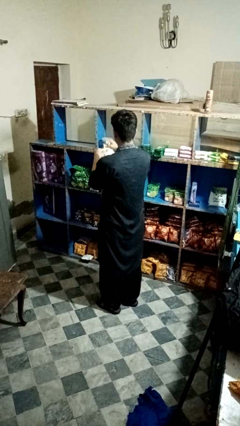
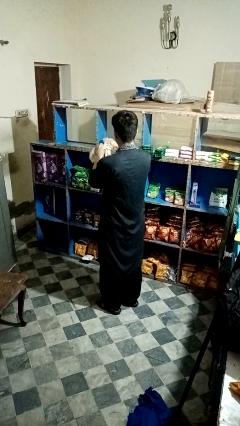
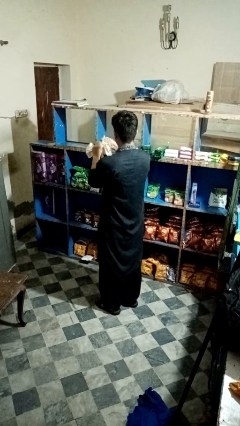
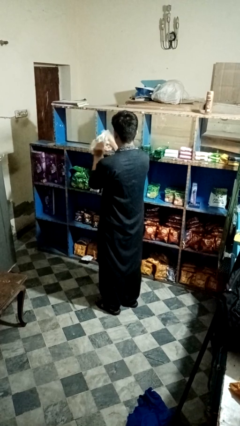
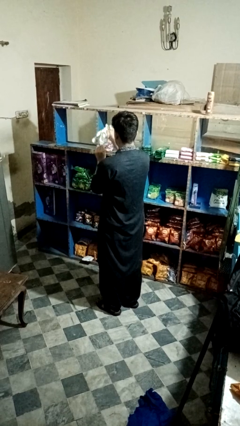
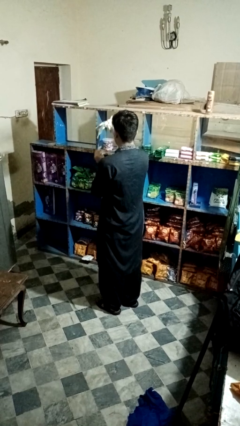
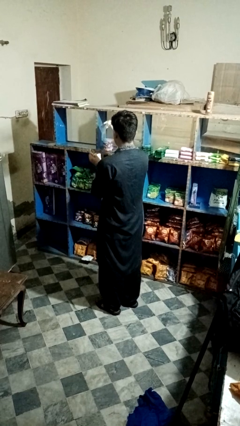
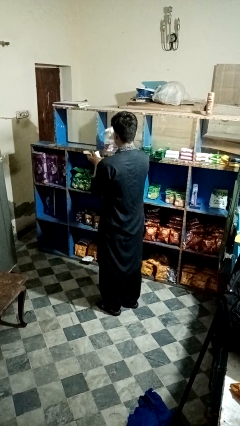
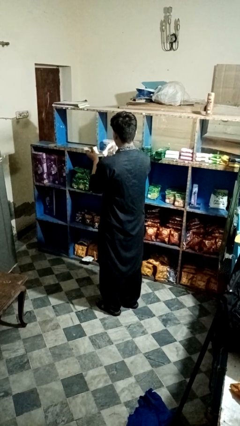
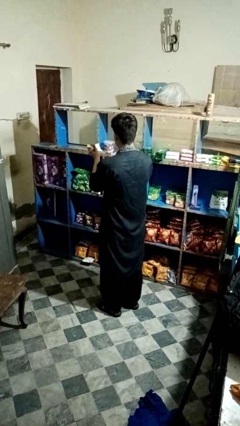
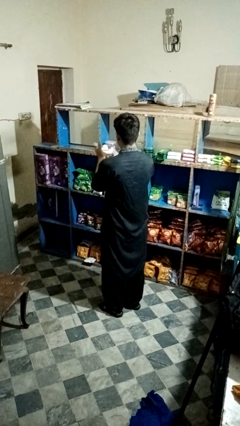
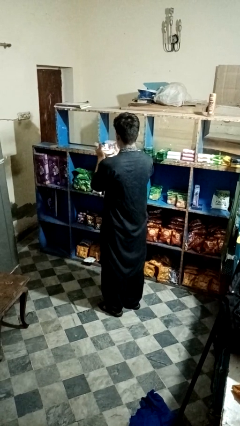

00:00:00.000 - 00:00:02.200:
person tears paper

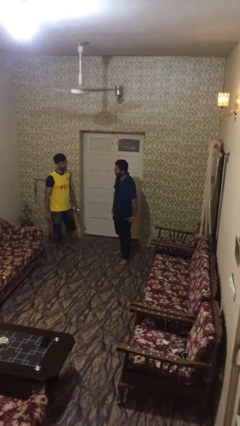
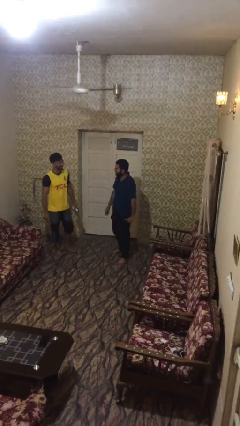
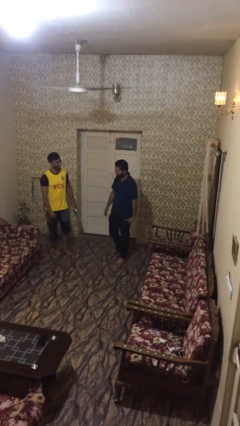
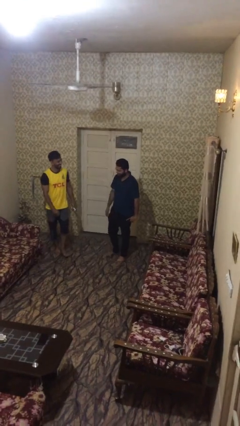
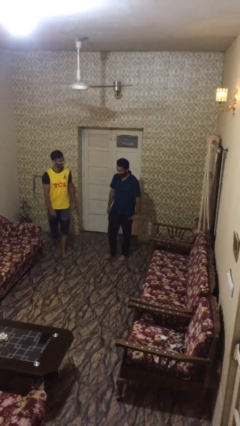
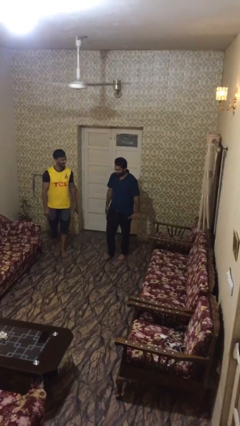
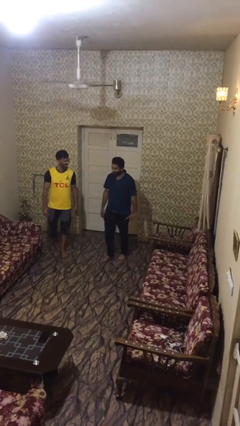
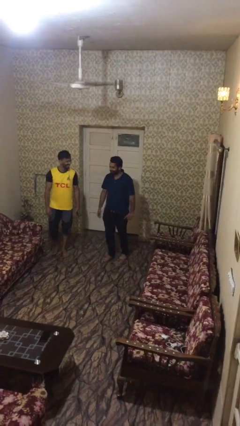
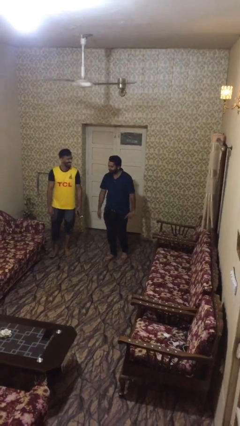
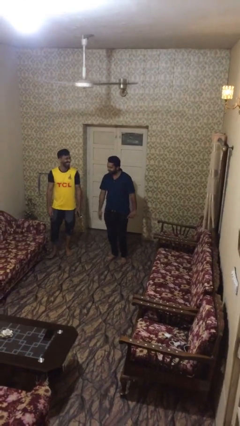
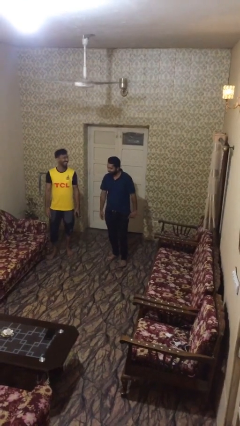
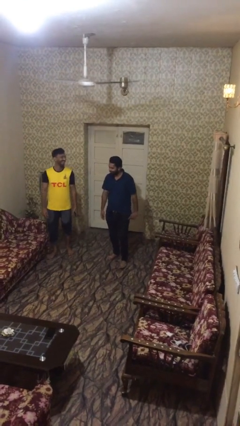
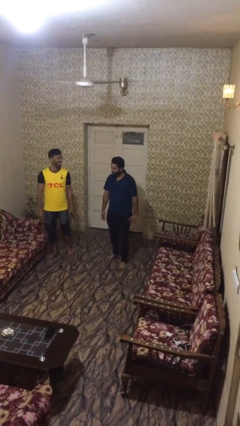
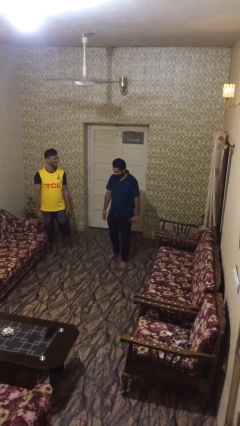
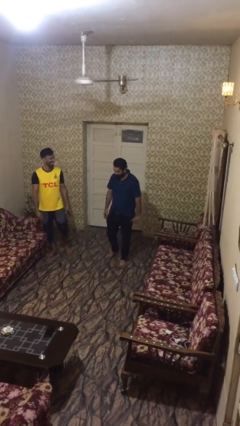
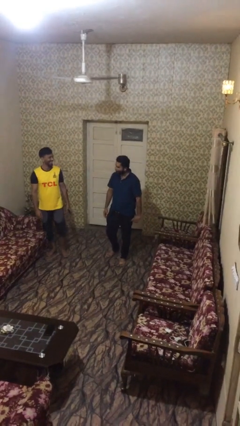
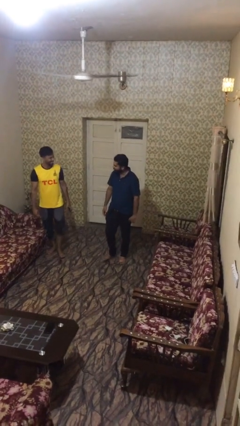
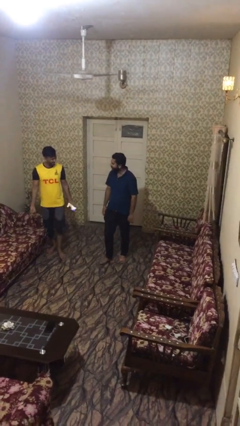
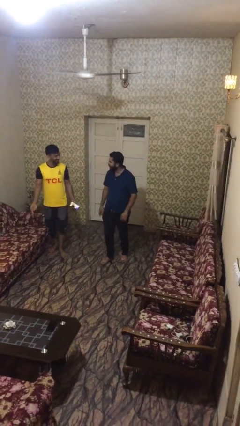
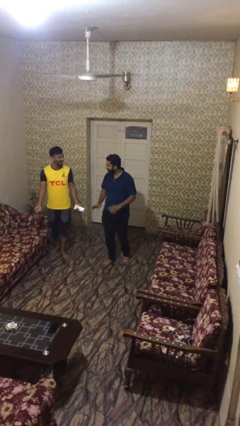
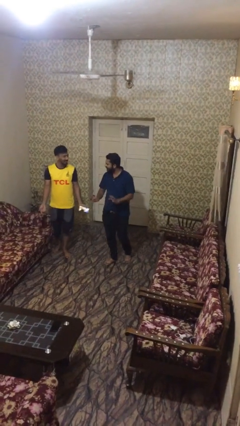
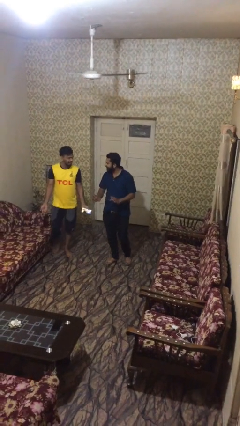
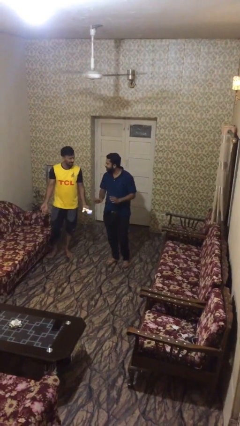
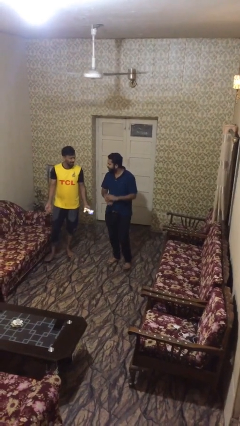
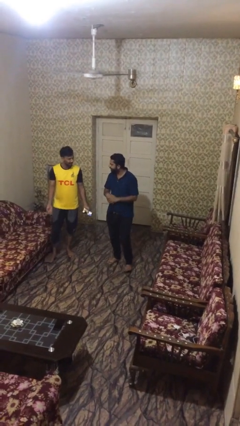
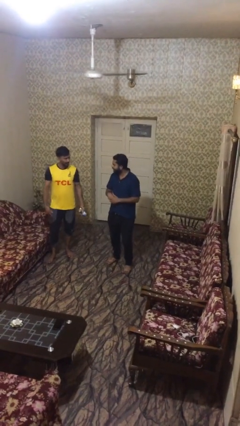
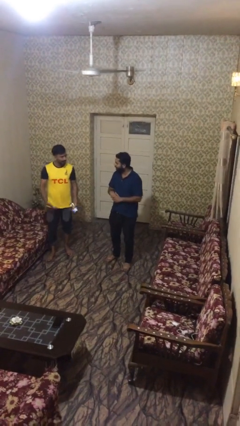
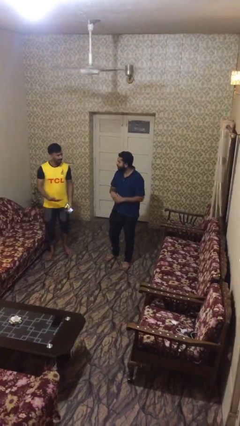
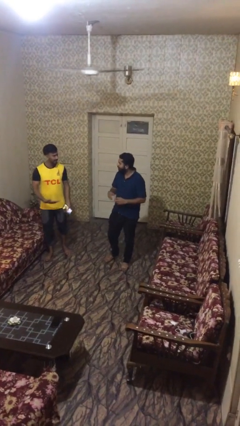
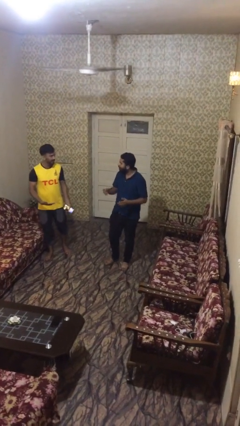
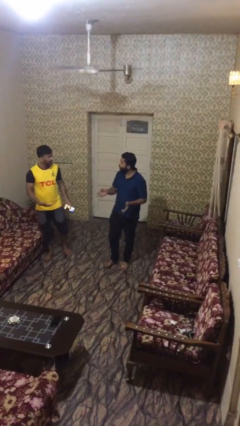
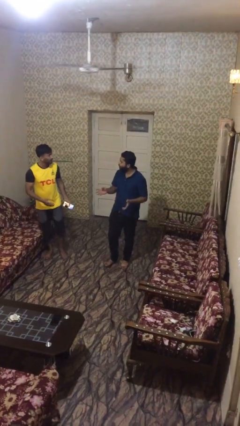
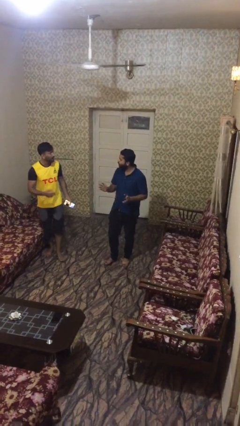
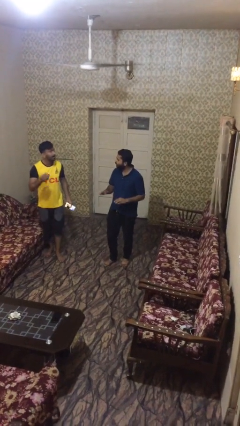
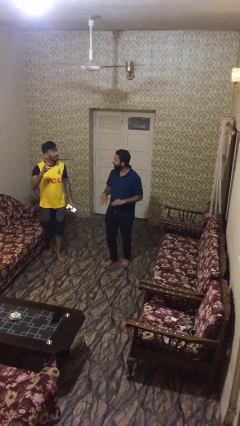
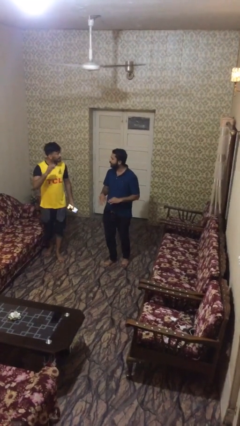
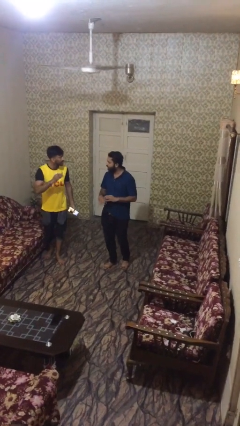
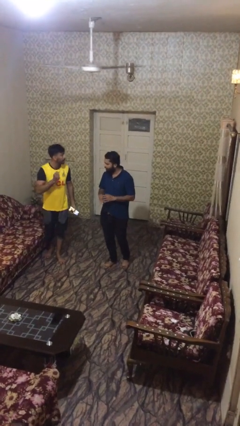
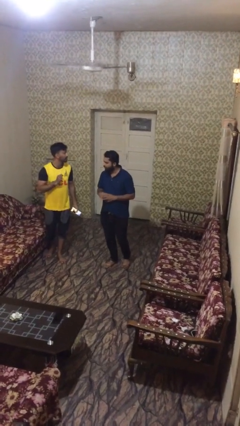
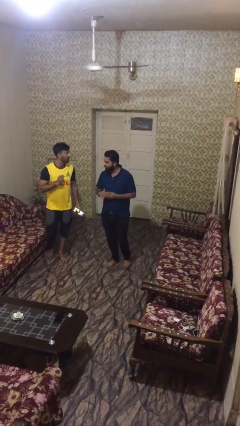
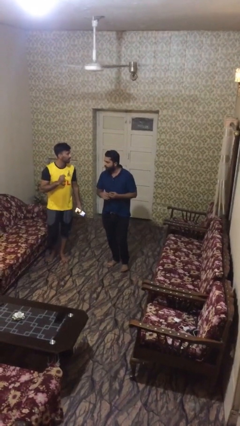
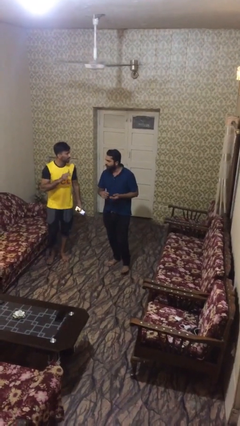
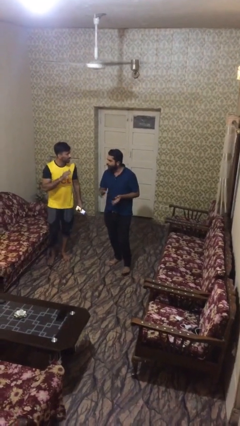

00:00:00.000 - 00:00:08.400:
person talks to person

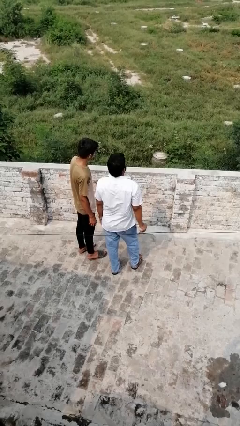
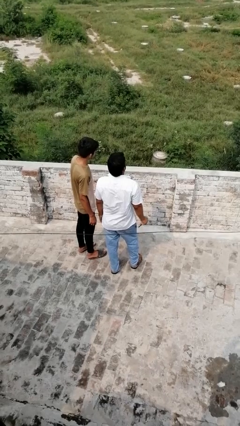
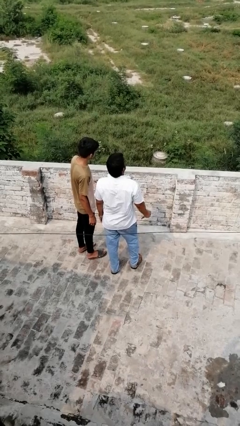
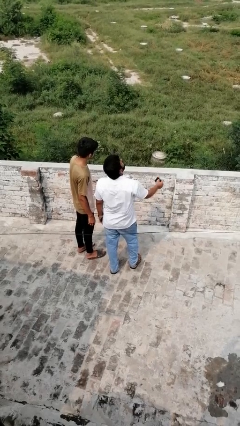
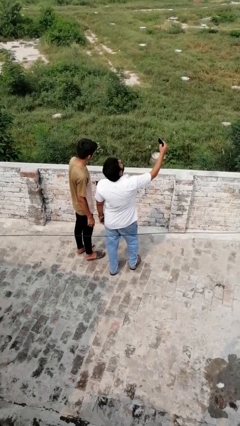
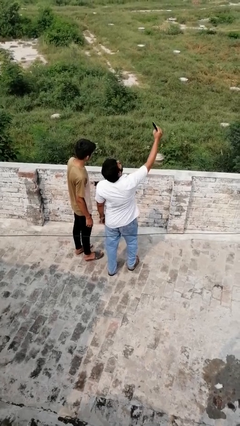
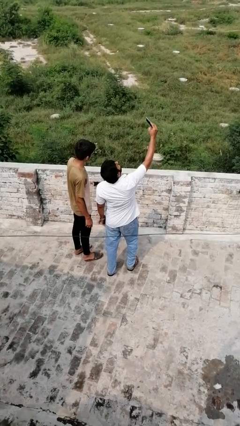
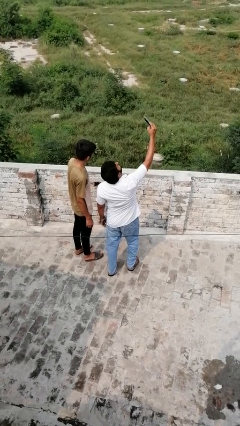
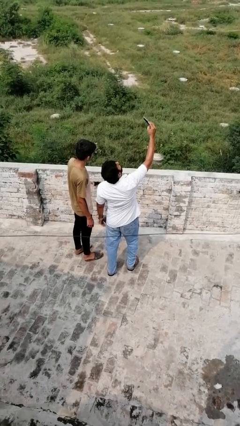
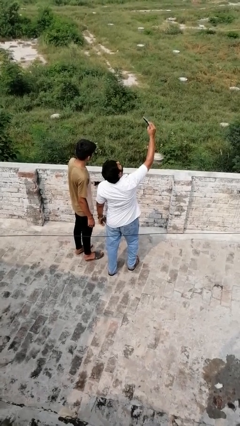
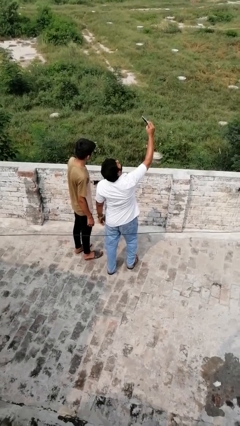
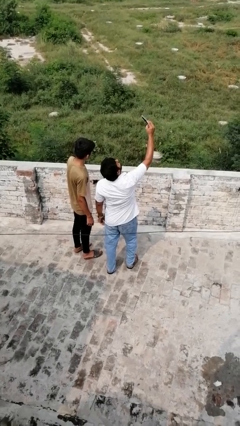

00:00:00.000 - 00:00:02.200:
person takes selfie with person

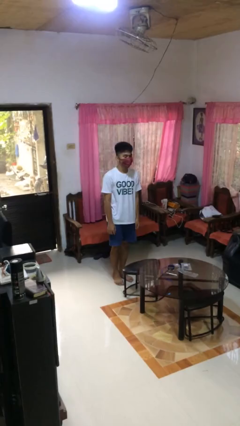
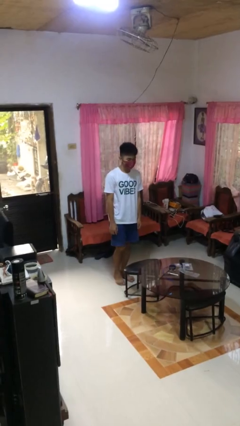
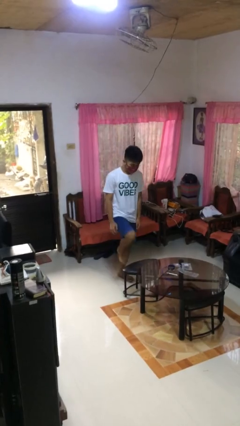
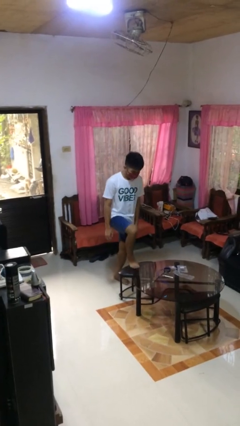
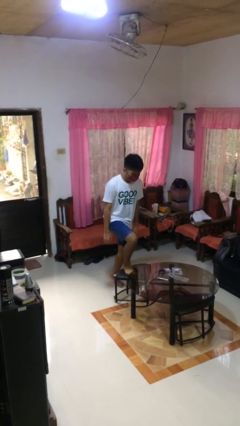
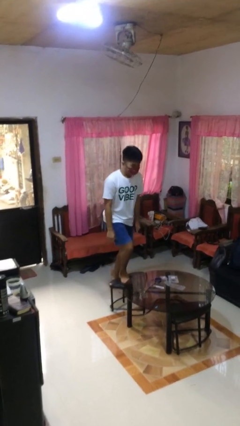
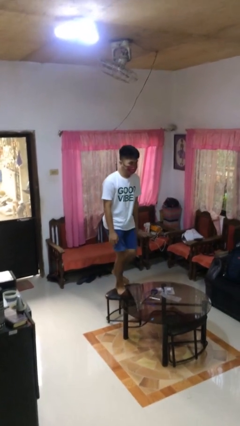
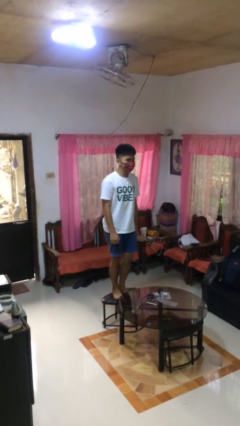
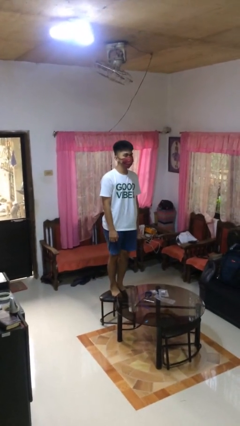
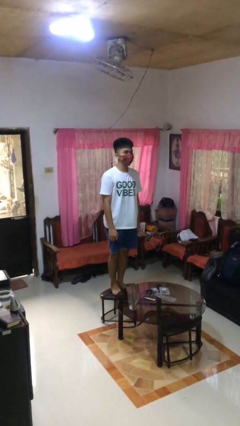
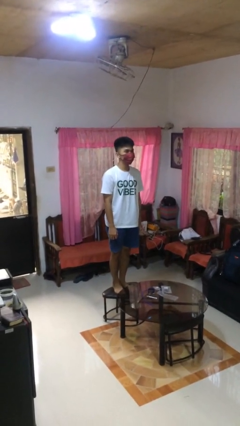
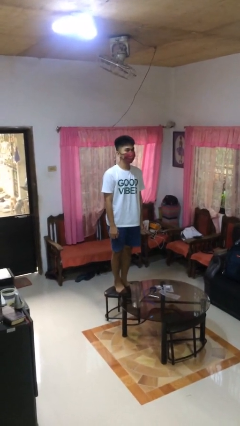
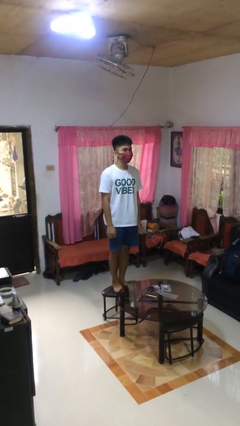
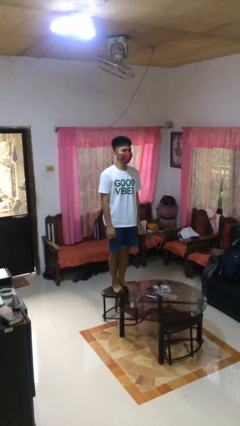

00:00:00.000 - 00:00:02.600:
person climbs on chair

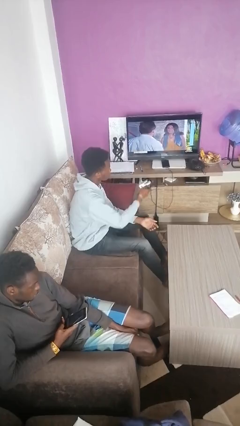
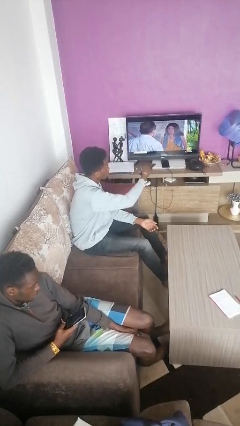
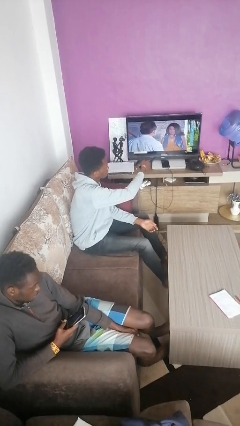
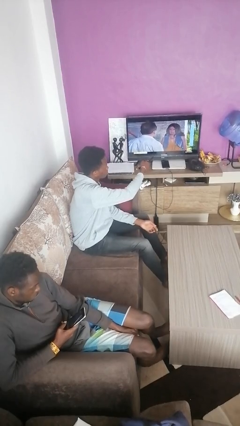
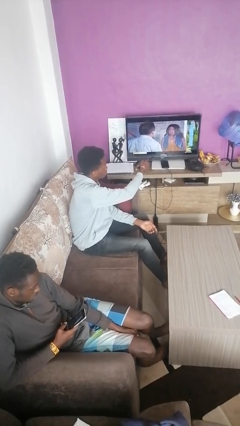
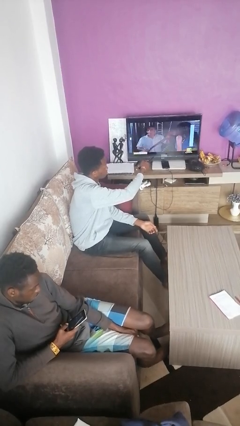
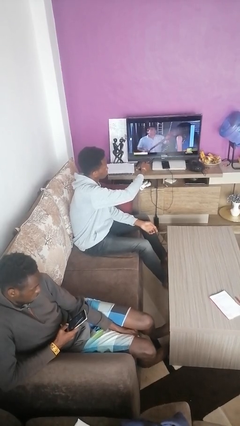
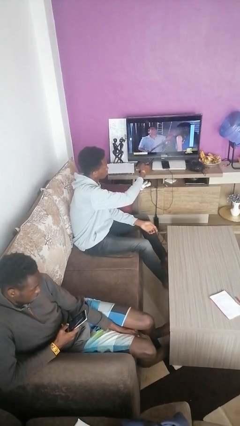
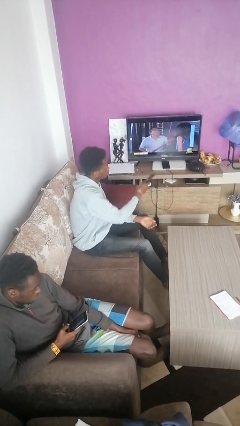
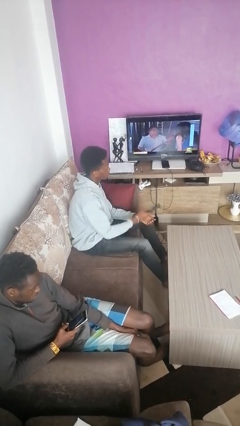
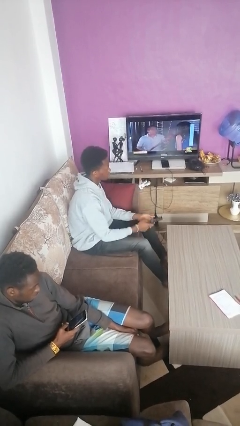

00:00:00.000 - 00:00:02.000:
person uses television remote
